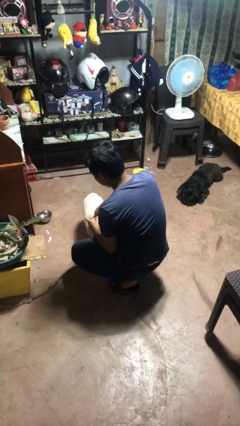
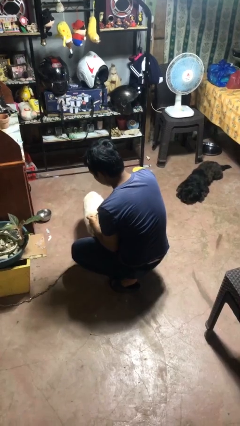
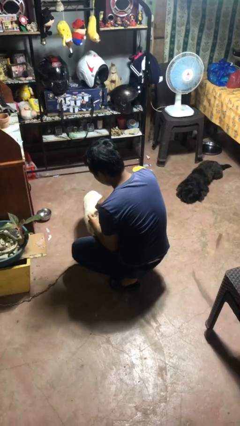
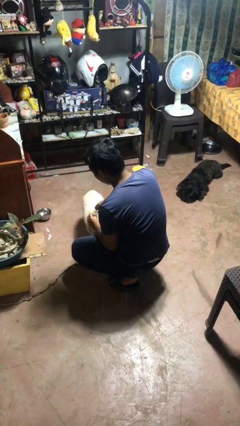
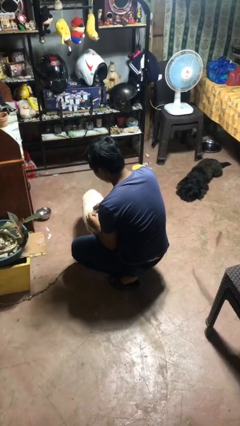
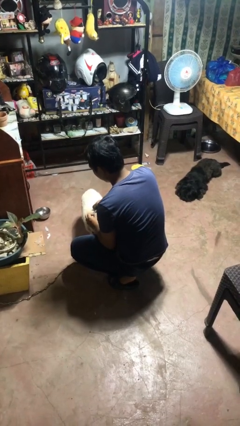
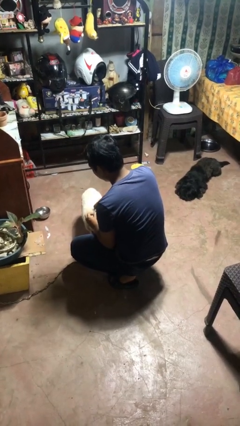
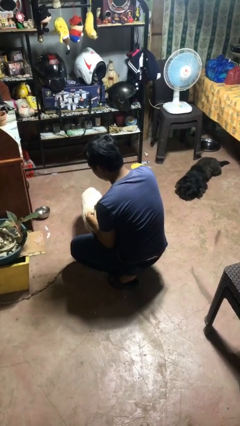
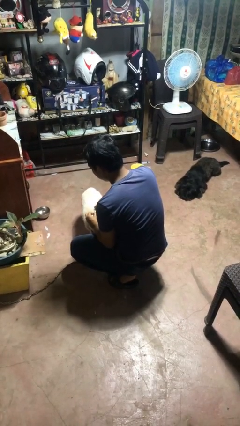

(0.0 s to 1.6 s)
person attaches leash to dog

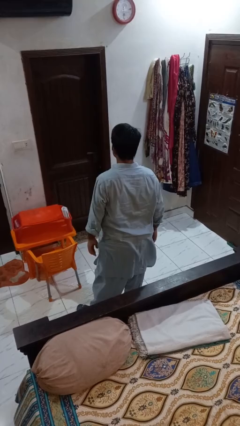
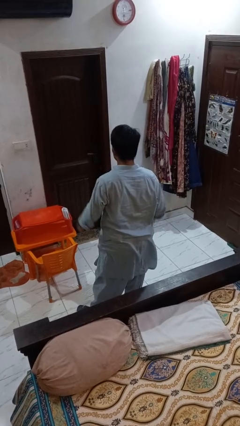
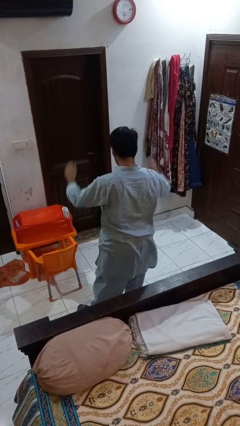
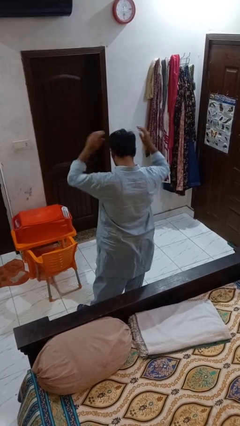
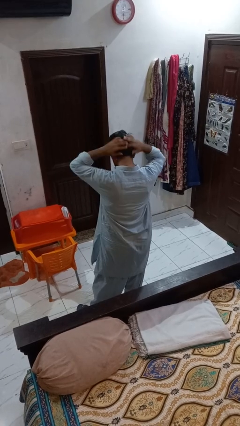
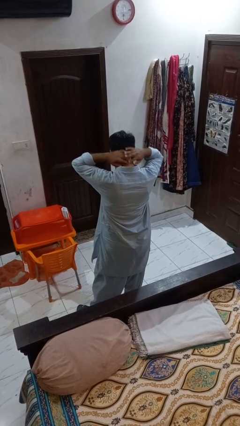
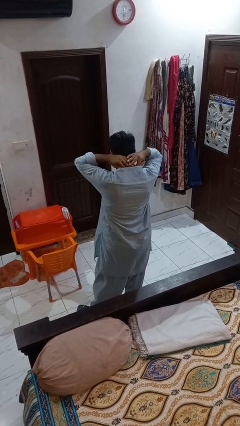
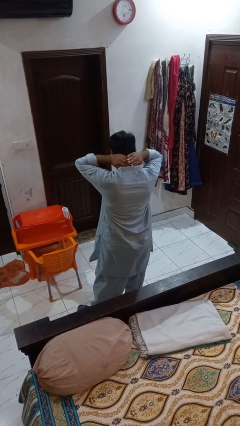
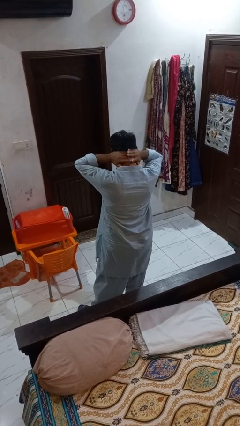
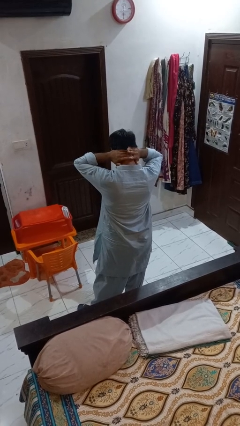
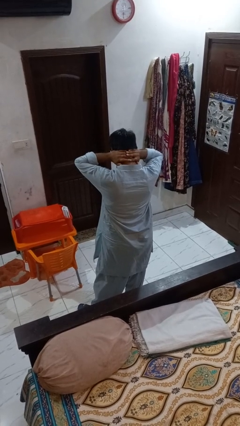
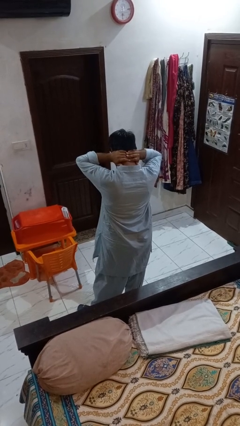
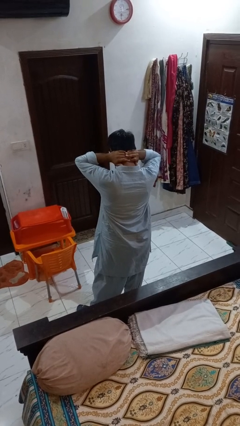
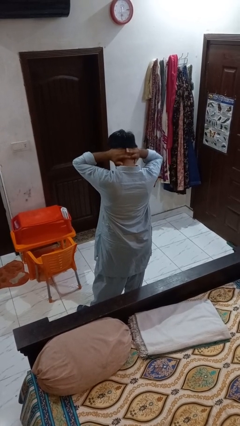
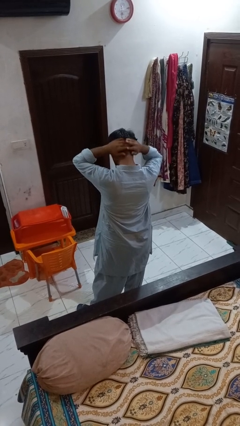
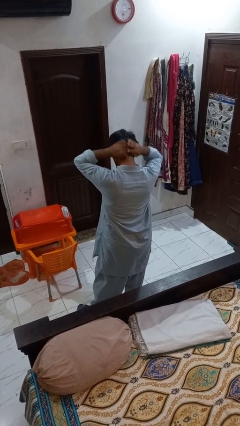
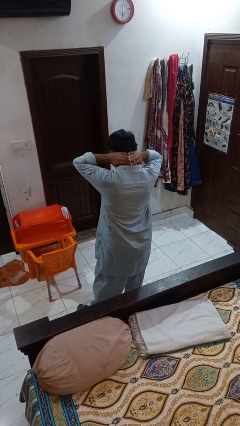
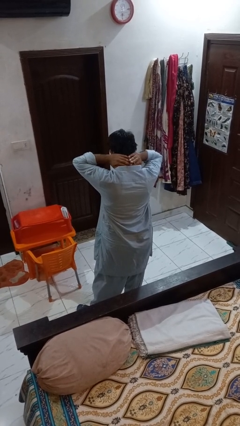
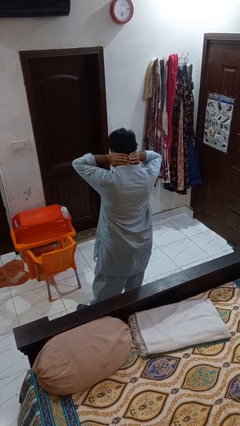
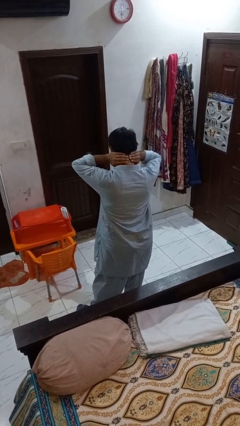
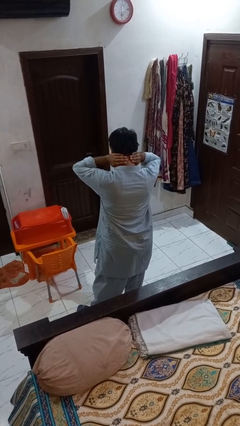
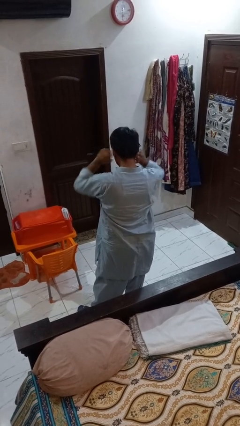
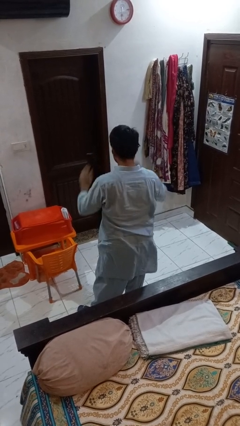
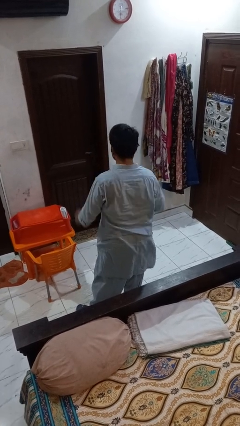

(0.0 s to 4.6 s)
person rubs neck

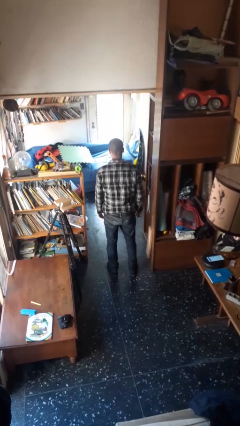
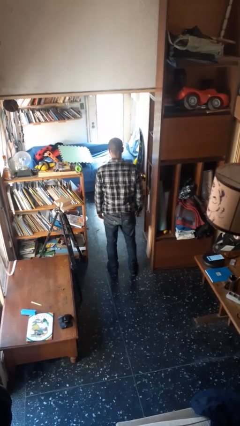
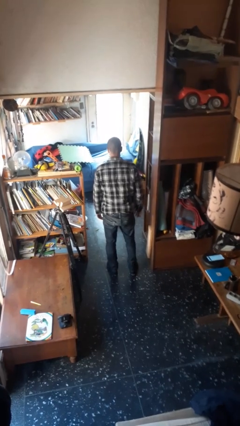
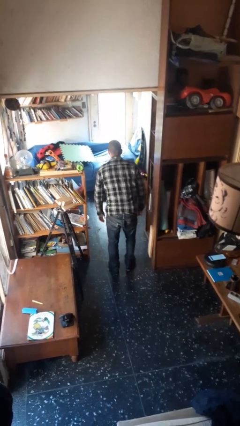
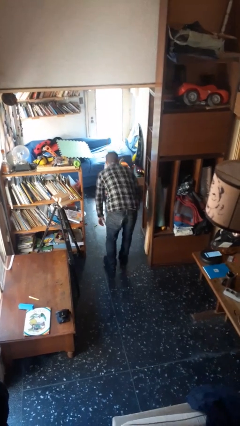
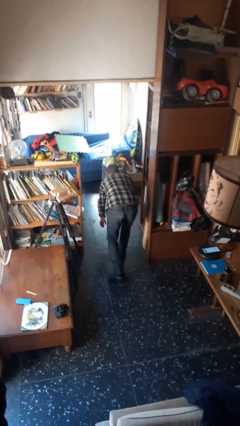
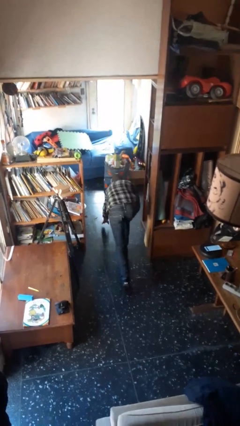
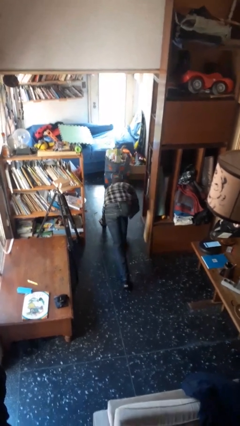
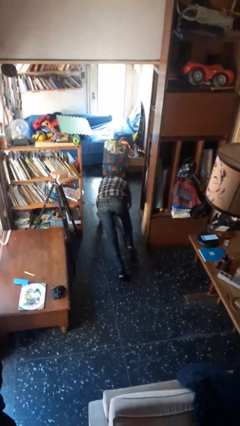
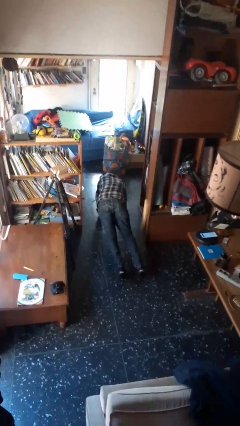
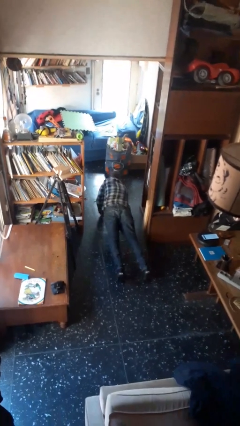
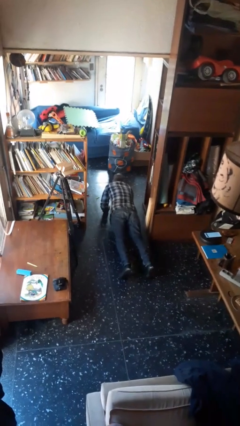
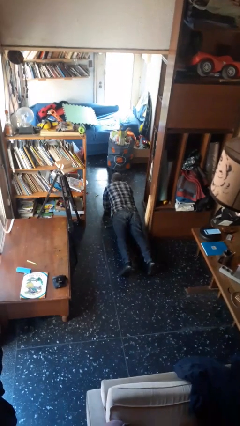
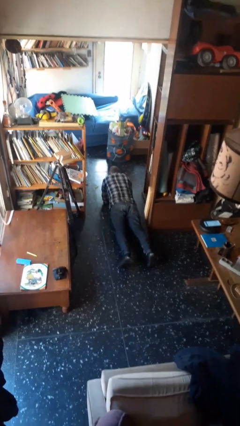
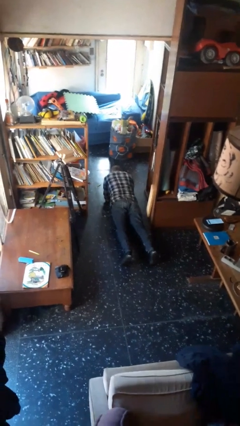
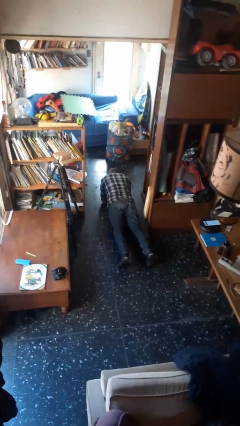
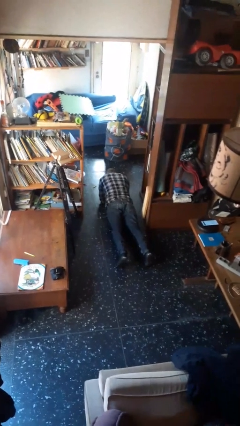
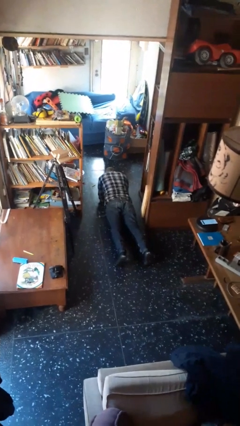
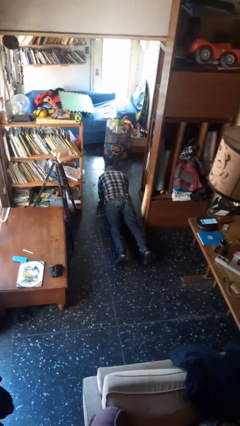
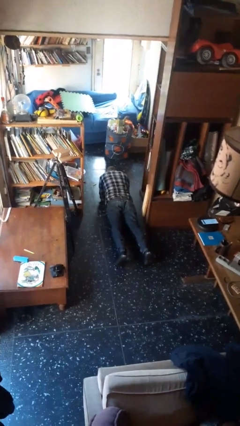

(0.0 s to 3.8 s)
person exercises with plank

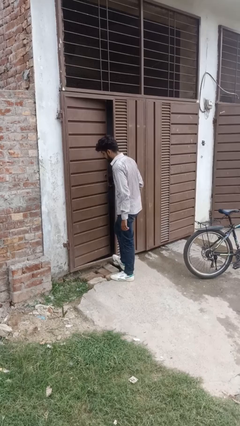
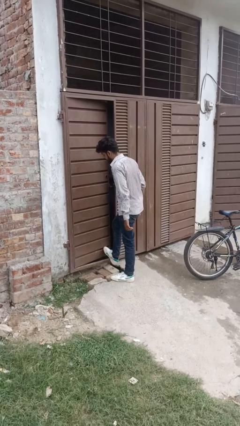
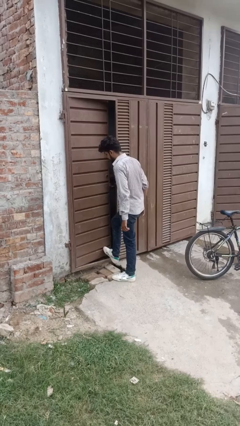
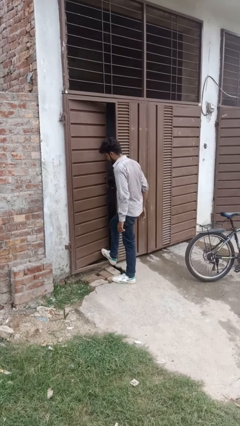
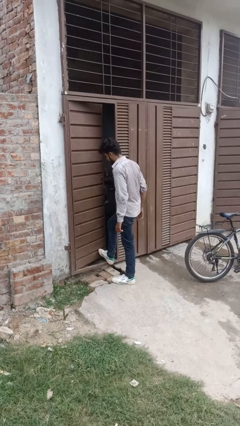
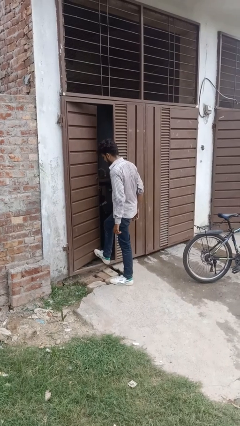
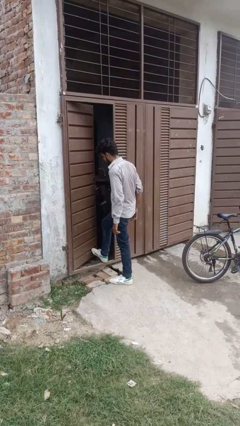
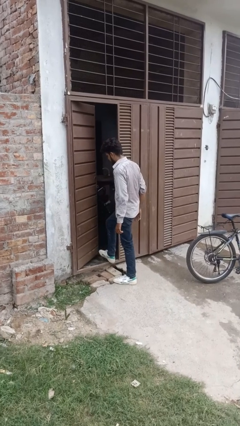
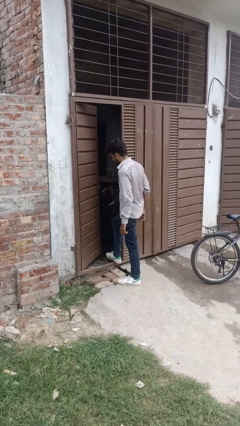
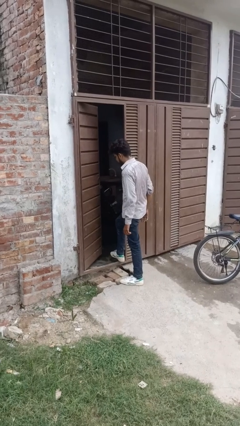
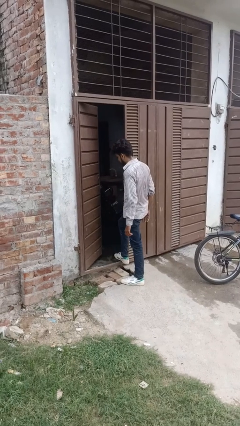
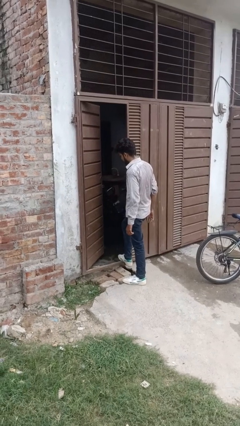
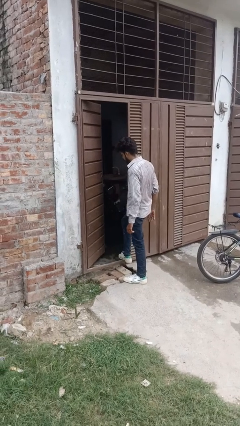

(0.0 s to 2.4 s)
person opens facility door

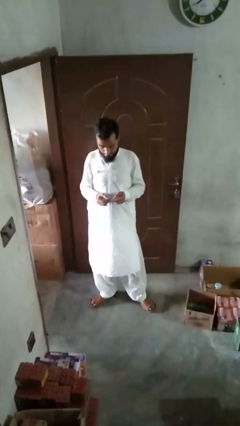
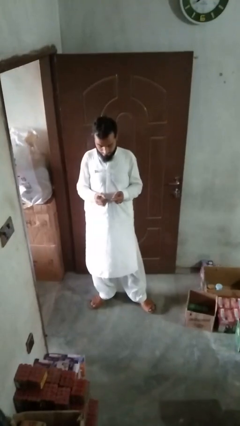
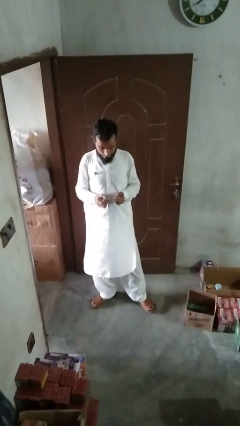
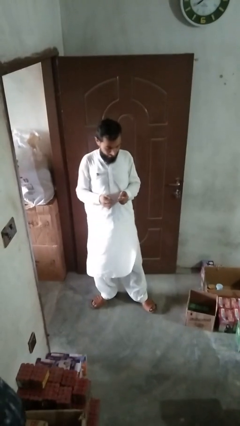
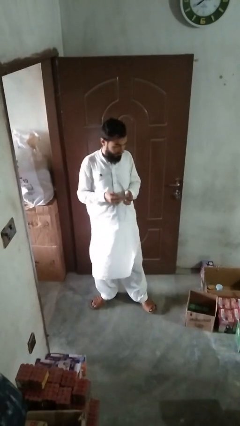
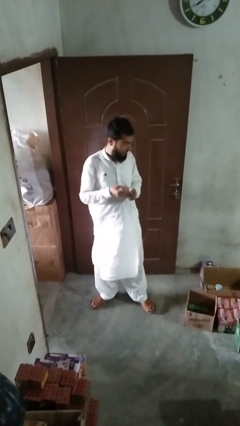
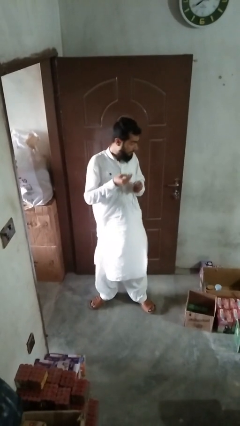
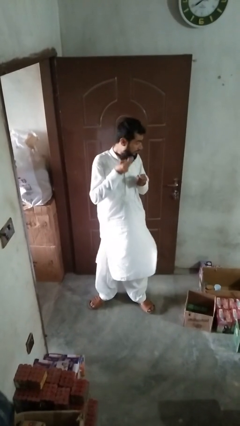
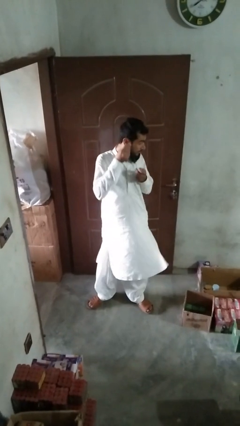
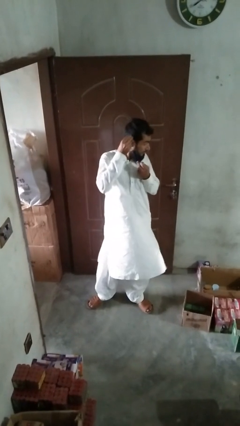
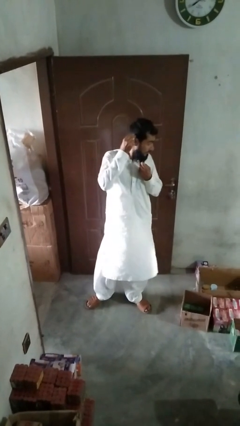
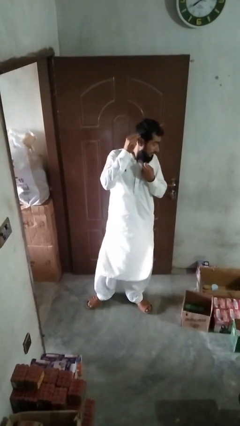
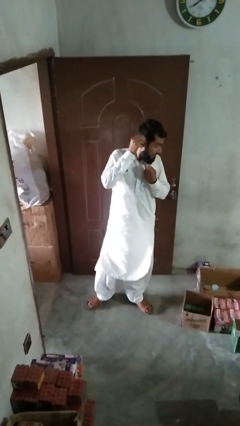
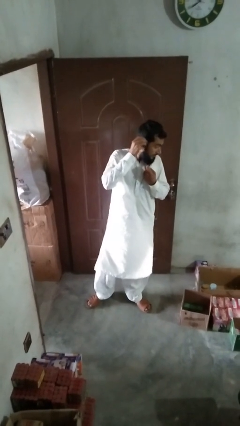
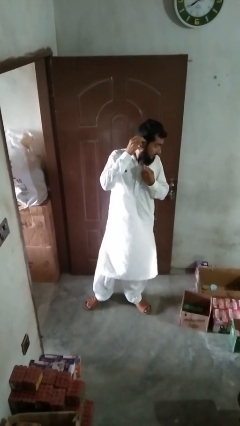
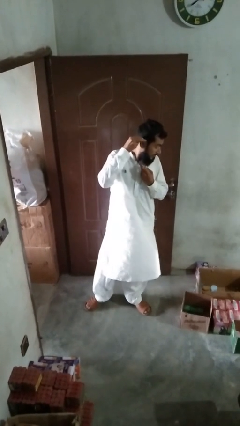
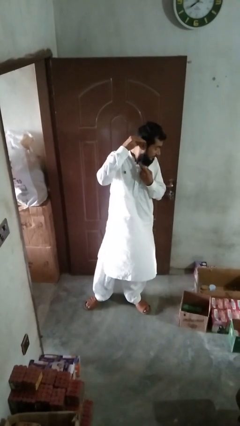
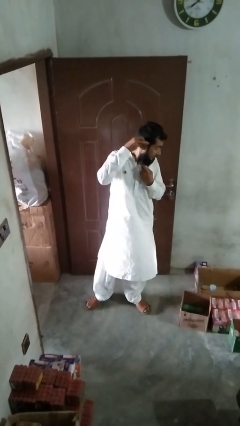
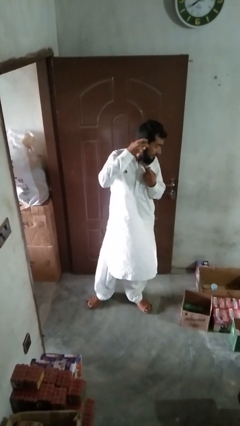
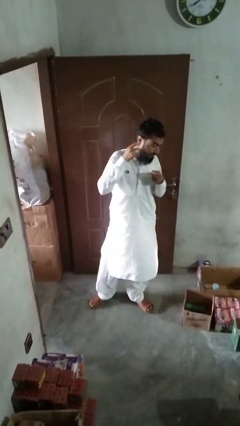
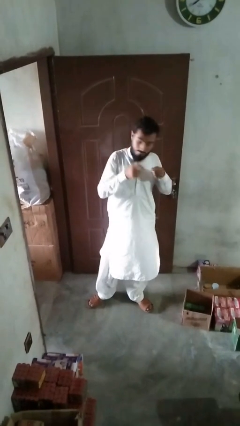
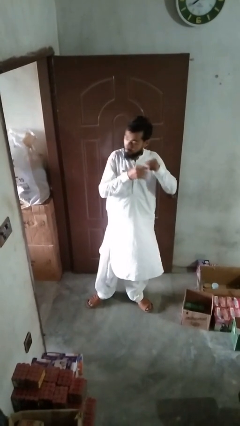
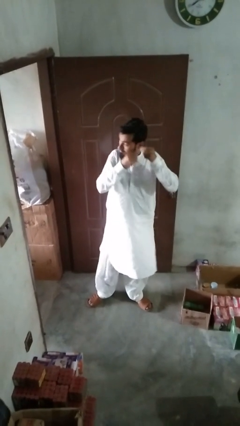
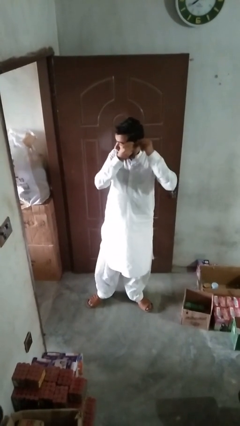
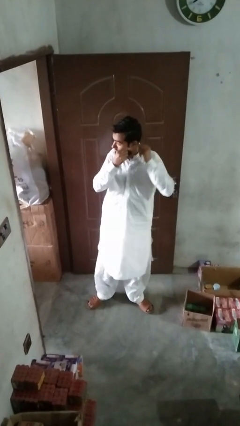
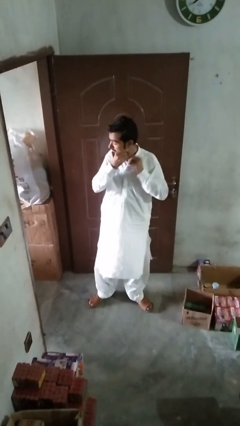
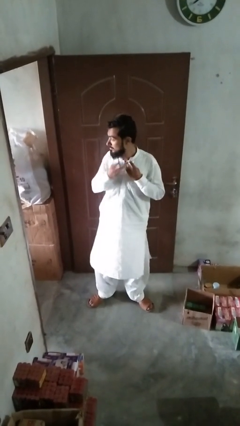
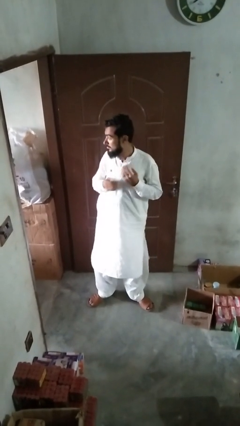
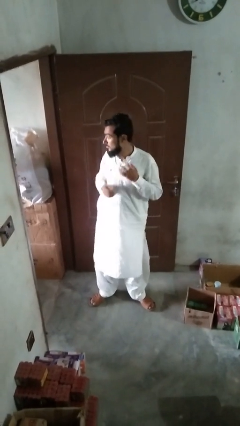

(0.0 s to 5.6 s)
person puts on earrings
